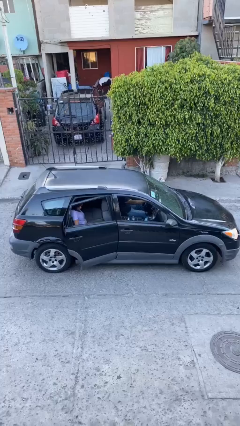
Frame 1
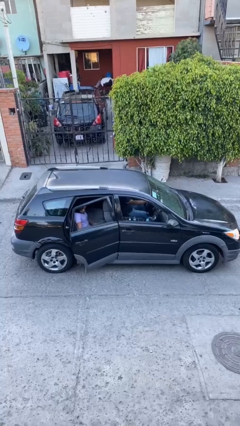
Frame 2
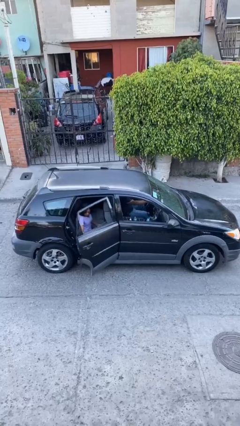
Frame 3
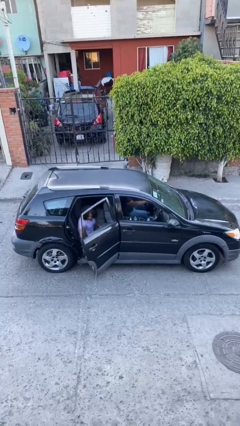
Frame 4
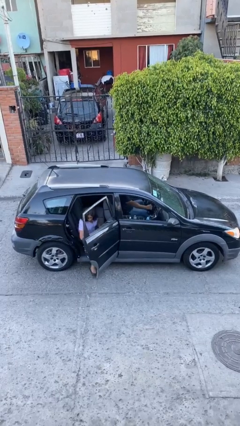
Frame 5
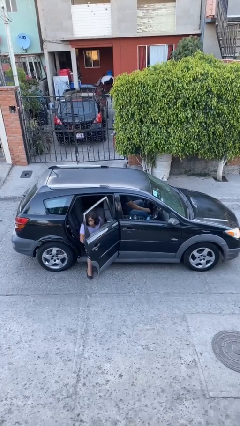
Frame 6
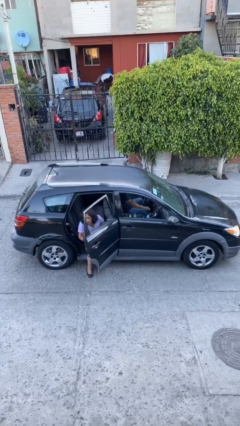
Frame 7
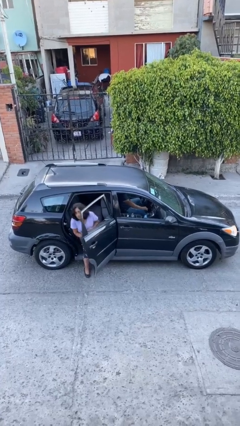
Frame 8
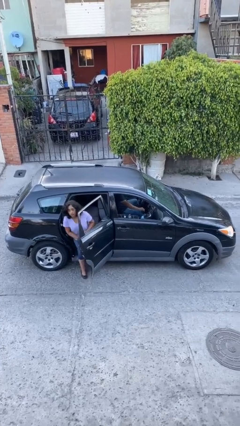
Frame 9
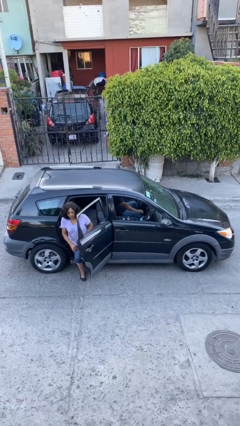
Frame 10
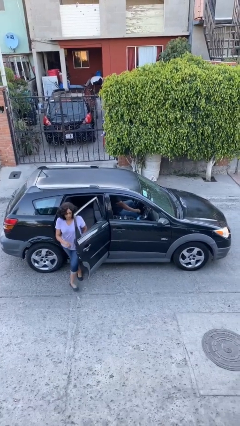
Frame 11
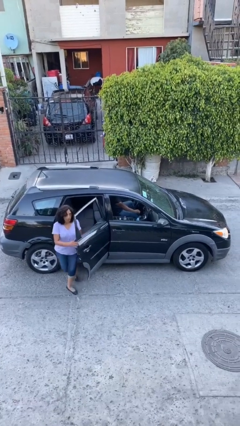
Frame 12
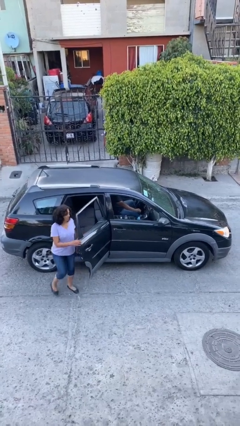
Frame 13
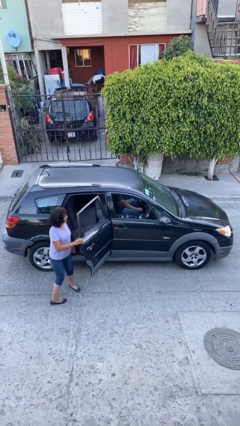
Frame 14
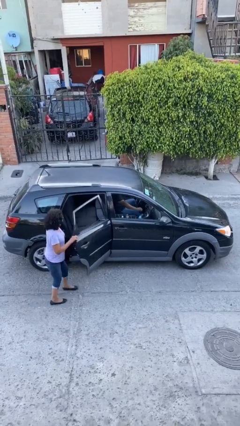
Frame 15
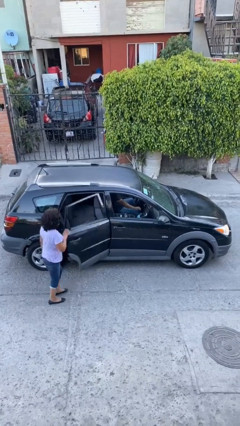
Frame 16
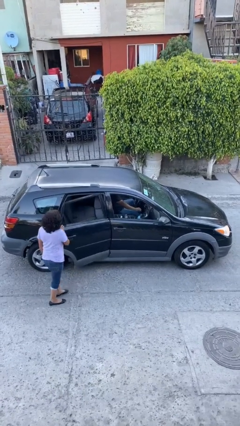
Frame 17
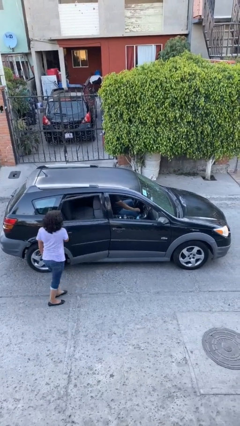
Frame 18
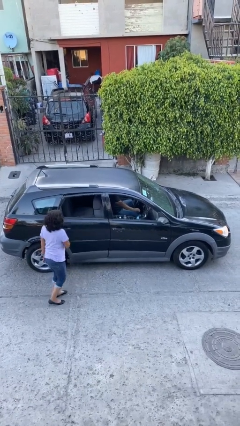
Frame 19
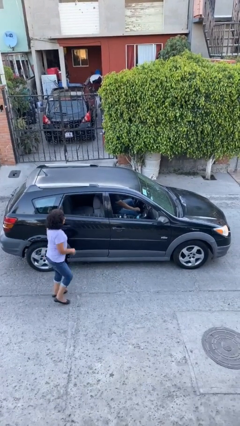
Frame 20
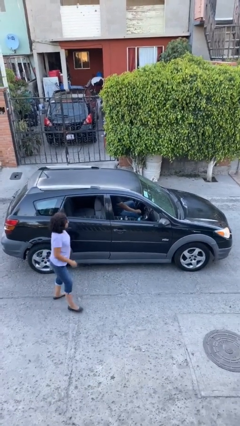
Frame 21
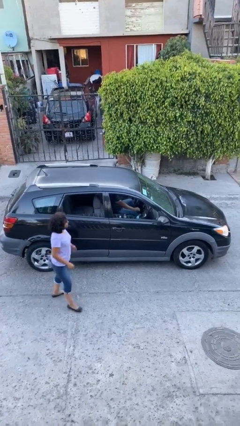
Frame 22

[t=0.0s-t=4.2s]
car drops off person

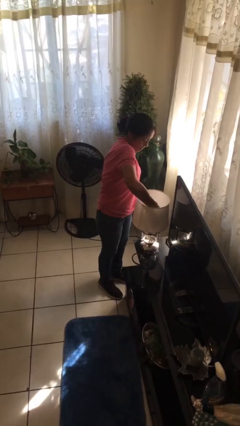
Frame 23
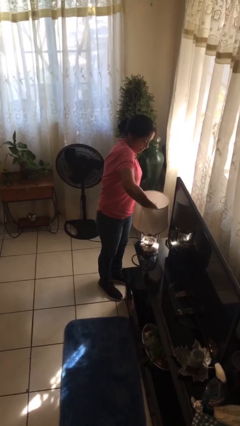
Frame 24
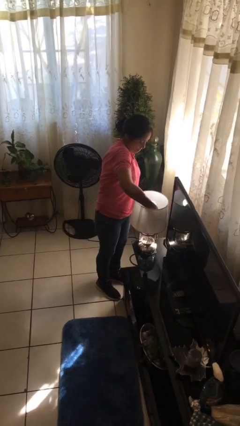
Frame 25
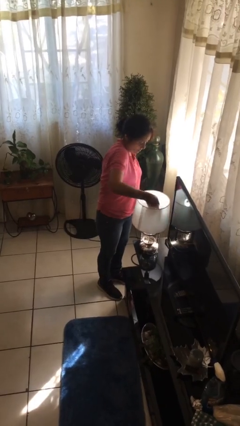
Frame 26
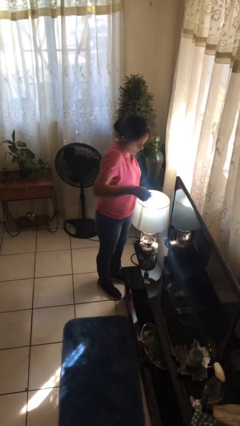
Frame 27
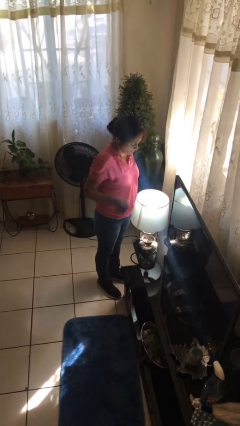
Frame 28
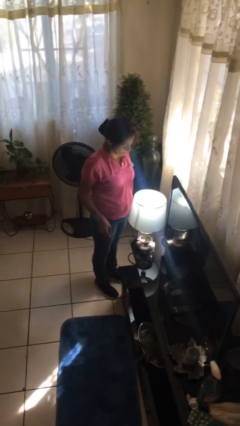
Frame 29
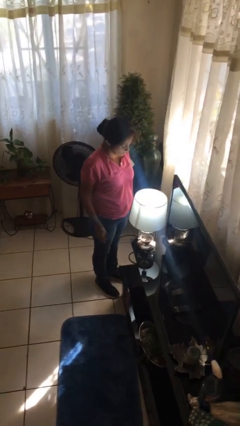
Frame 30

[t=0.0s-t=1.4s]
person turns on lamp

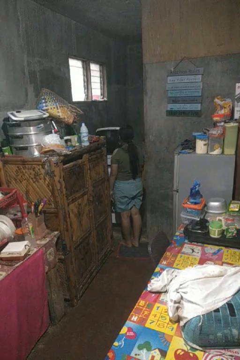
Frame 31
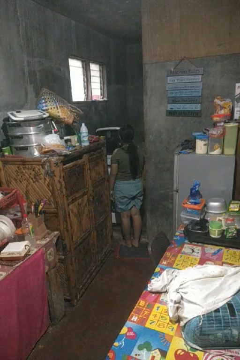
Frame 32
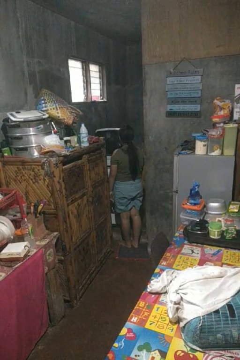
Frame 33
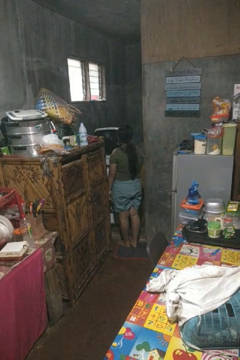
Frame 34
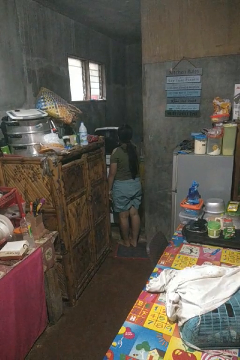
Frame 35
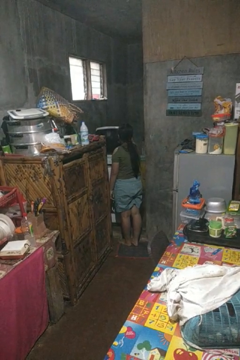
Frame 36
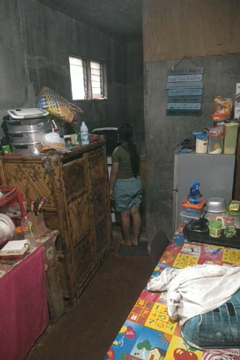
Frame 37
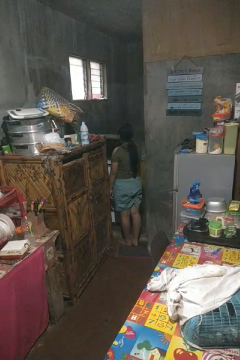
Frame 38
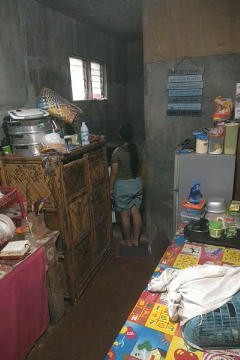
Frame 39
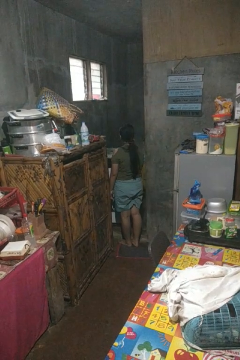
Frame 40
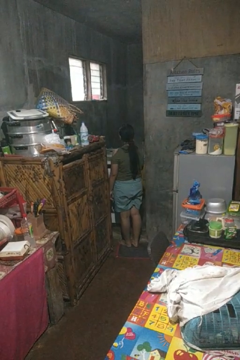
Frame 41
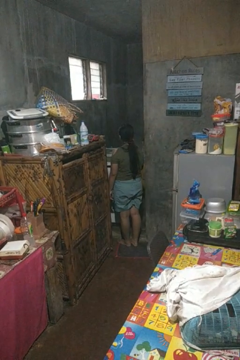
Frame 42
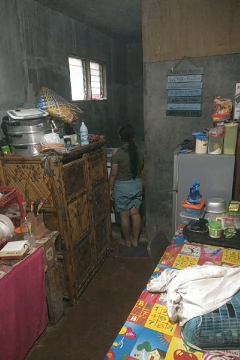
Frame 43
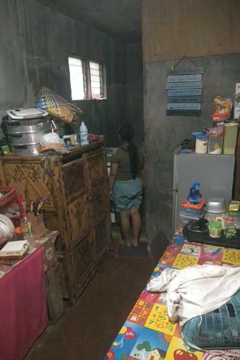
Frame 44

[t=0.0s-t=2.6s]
person closes clothes washer

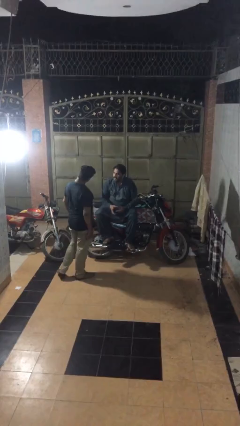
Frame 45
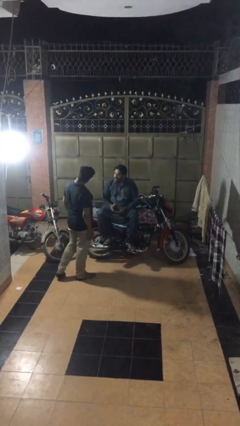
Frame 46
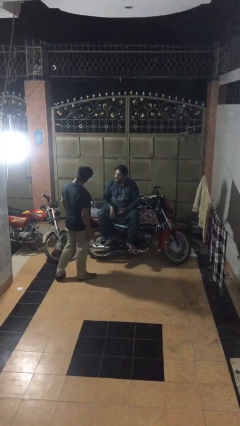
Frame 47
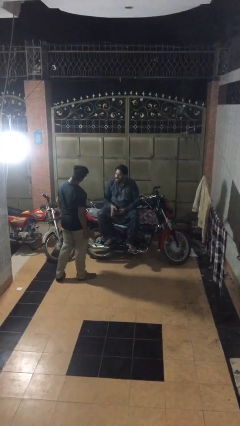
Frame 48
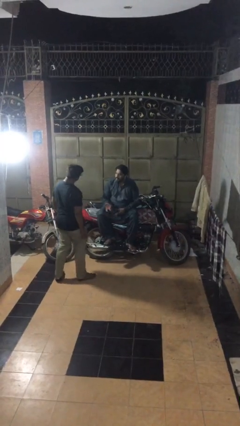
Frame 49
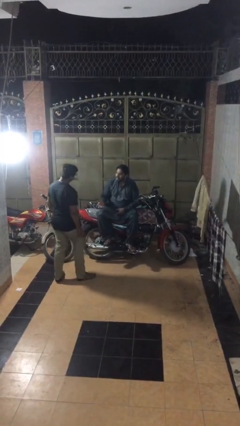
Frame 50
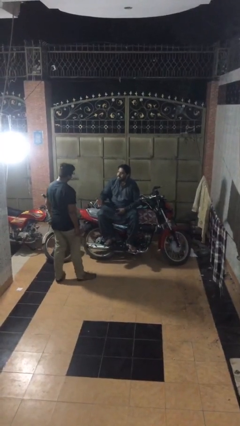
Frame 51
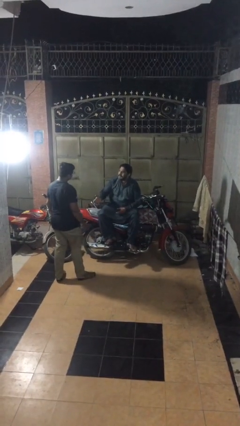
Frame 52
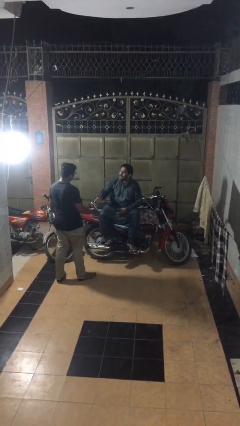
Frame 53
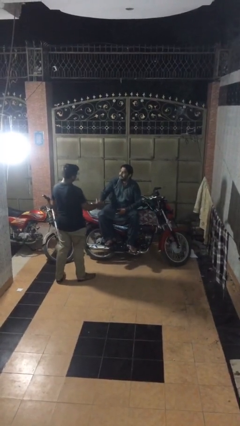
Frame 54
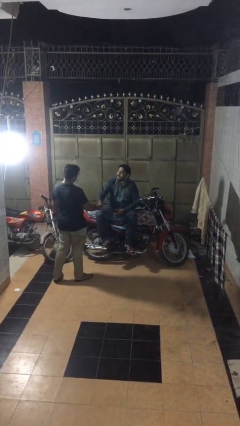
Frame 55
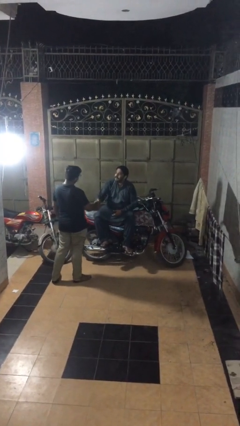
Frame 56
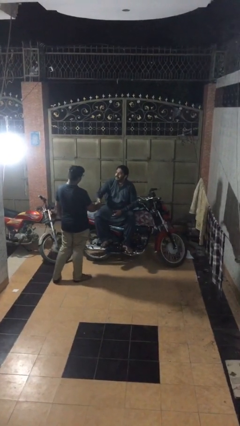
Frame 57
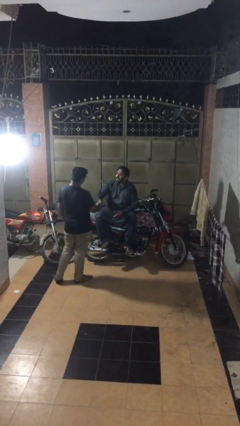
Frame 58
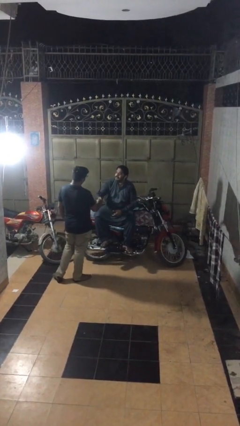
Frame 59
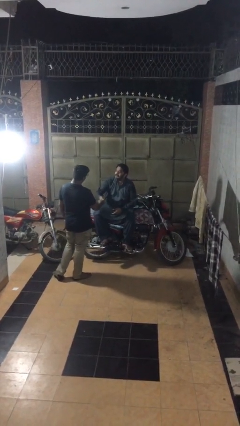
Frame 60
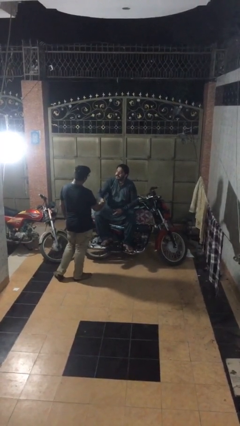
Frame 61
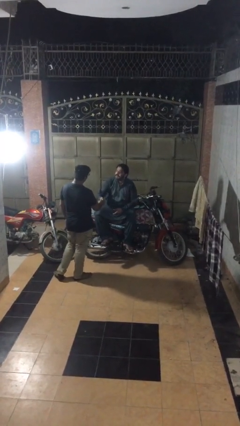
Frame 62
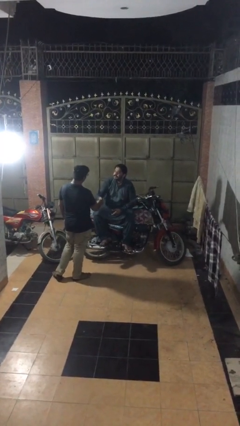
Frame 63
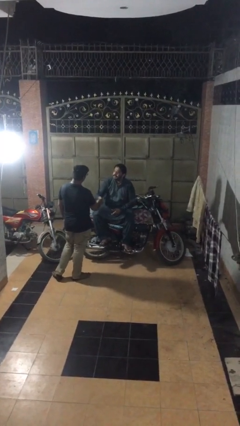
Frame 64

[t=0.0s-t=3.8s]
person shakes hand

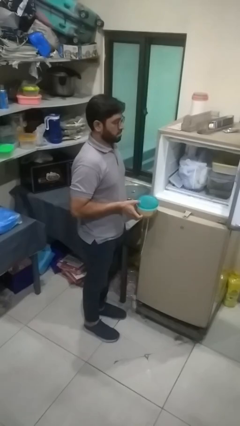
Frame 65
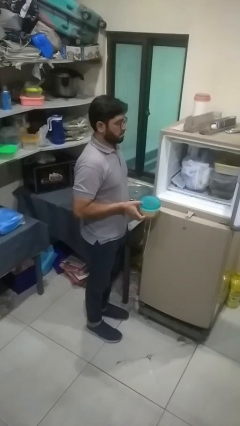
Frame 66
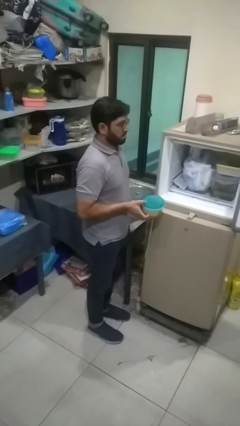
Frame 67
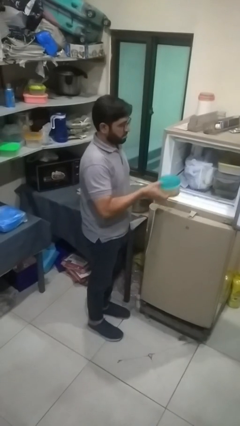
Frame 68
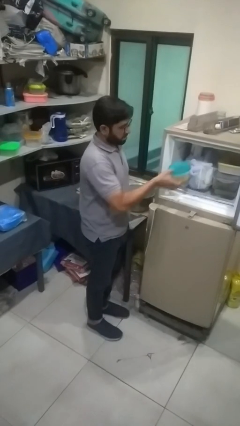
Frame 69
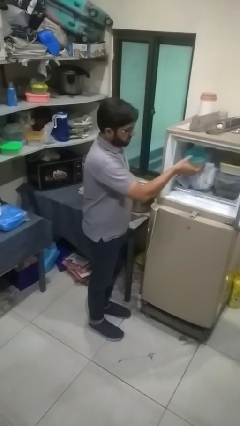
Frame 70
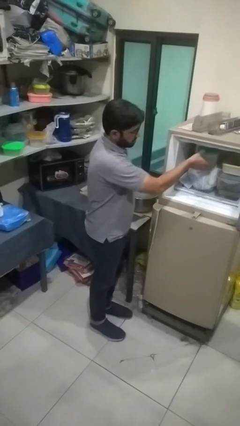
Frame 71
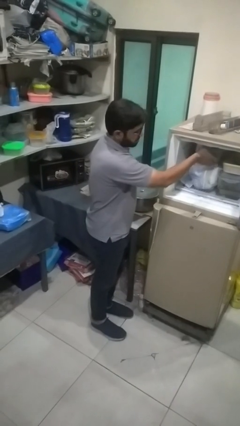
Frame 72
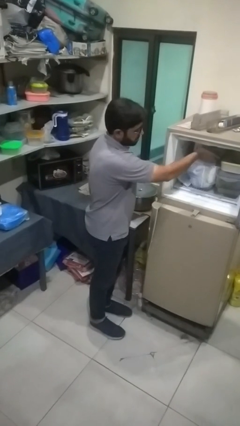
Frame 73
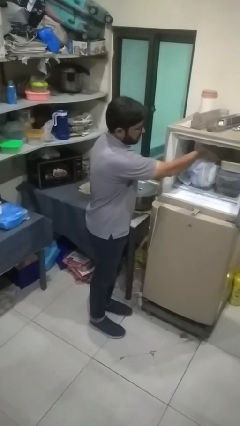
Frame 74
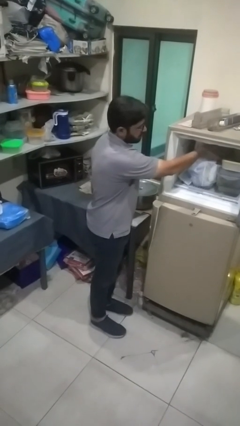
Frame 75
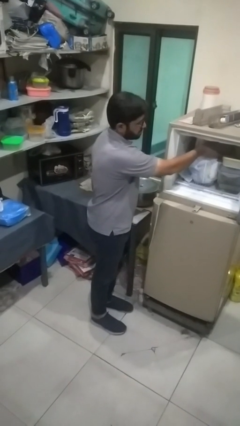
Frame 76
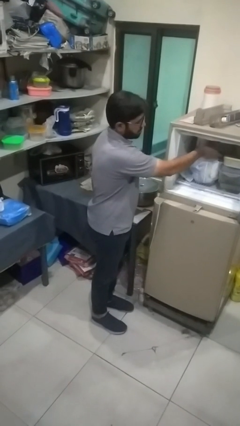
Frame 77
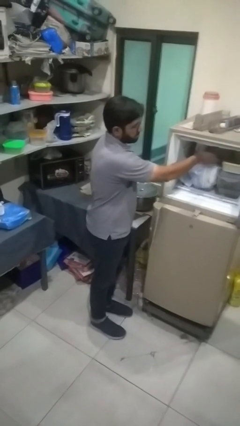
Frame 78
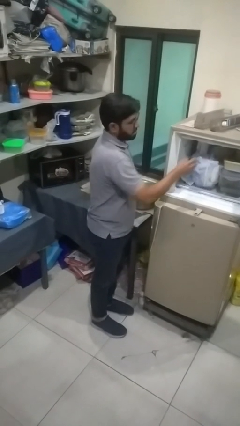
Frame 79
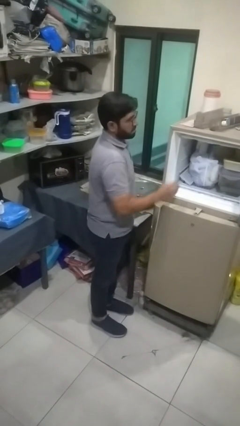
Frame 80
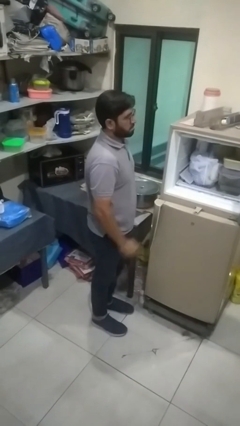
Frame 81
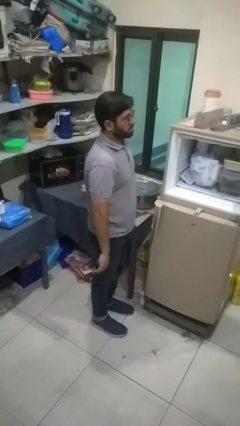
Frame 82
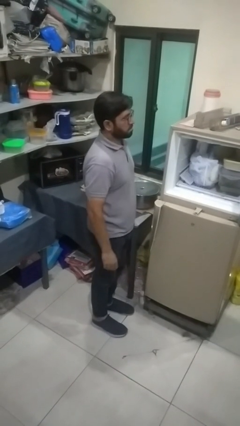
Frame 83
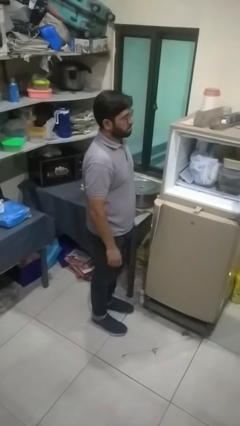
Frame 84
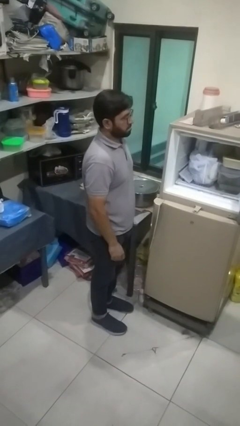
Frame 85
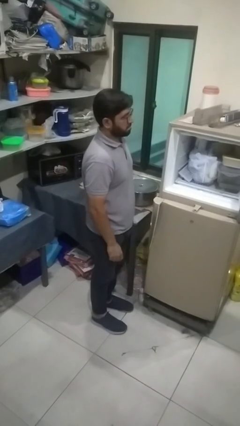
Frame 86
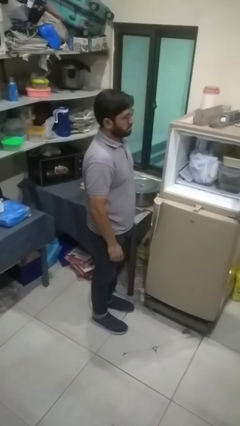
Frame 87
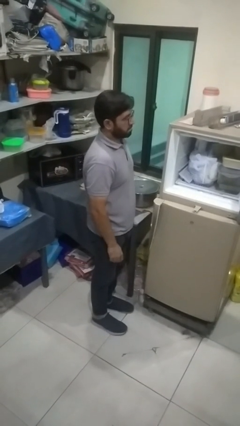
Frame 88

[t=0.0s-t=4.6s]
person puts object into refrigerator

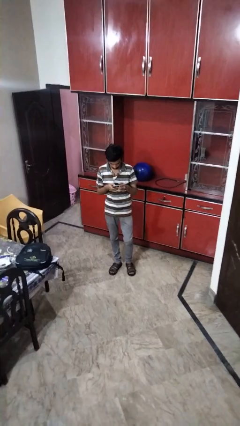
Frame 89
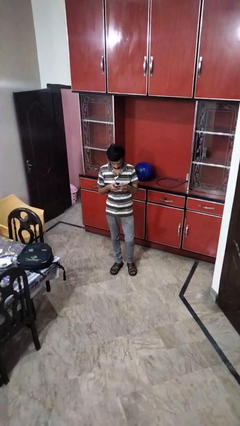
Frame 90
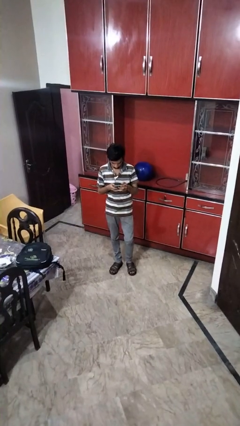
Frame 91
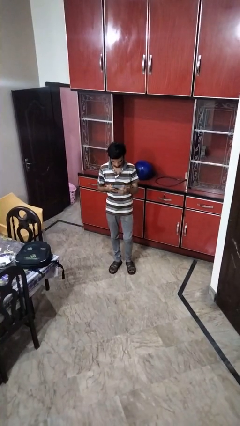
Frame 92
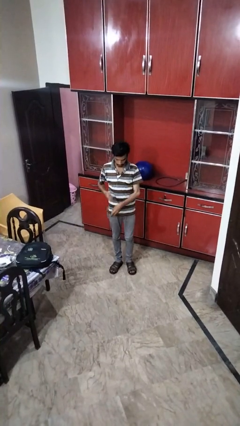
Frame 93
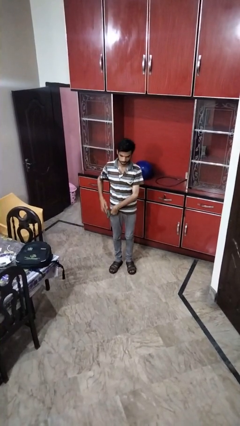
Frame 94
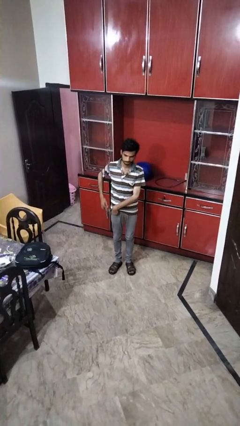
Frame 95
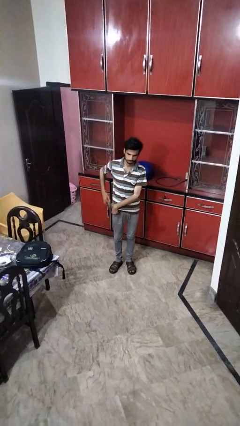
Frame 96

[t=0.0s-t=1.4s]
person puts phone into pocket
